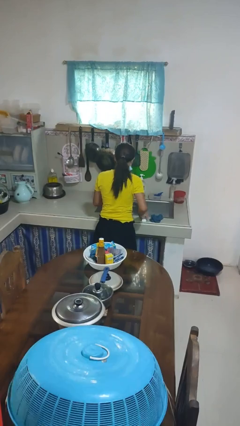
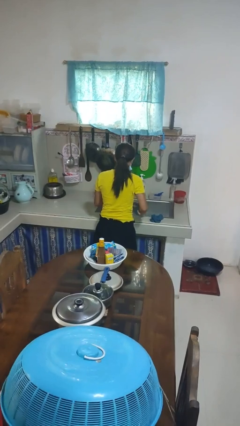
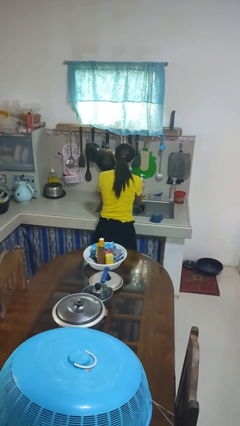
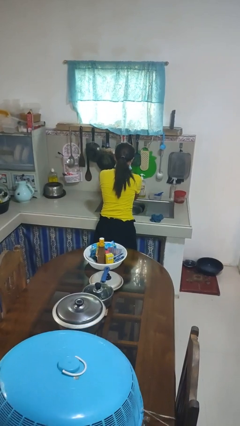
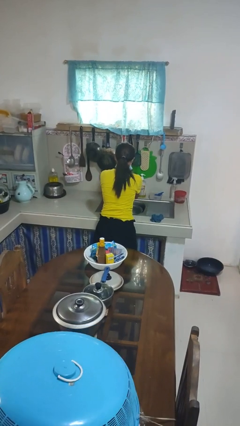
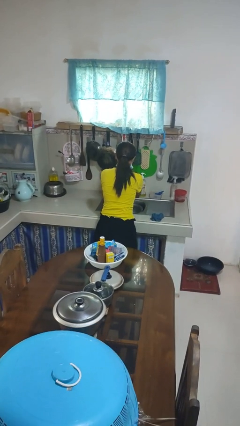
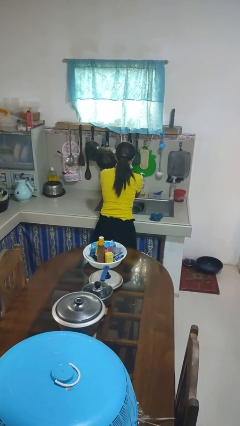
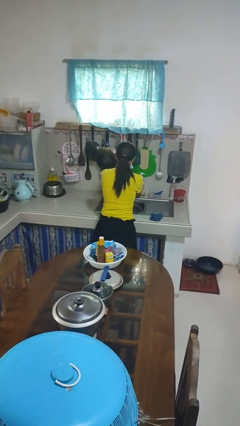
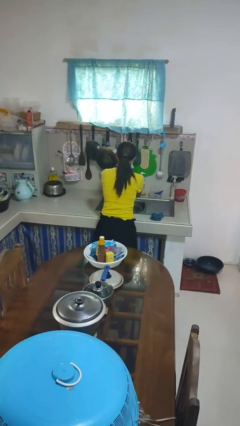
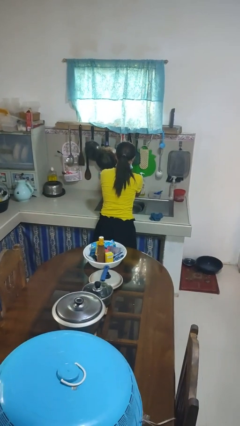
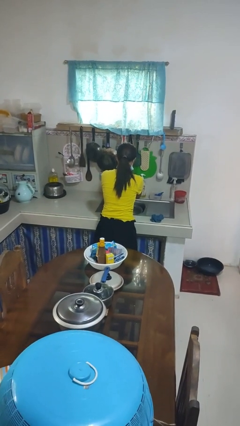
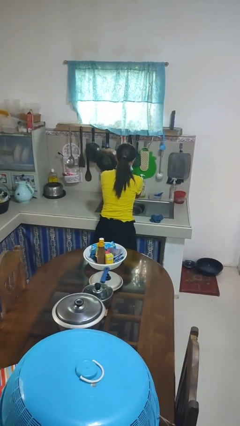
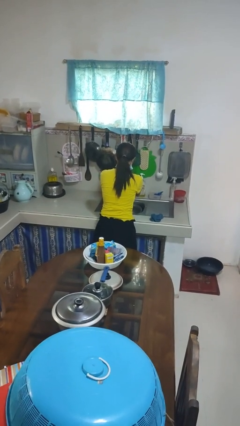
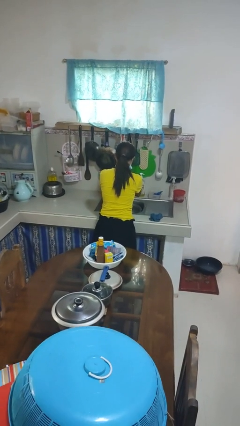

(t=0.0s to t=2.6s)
person washes hands

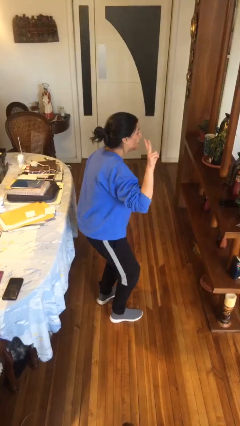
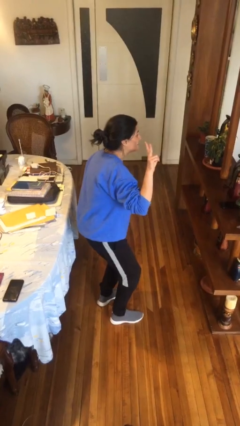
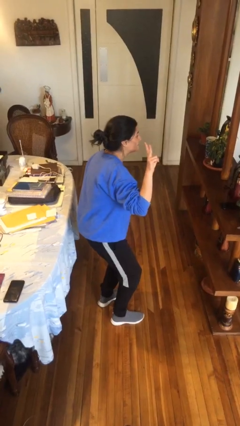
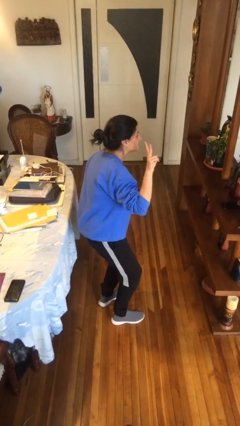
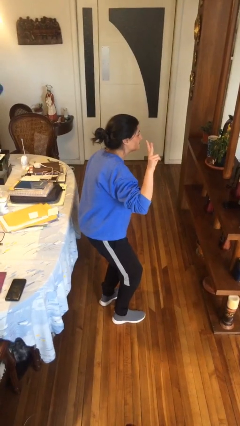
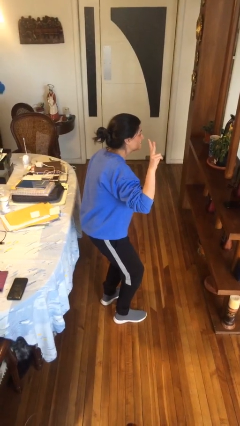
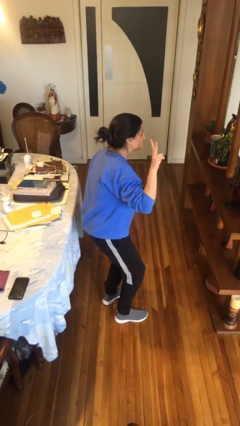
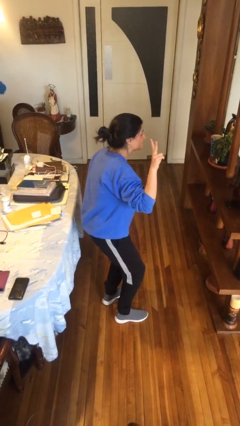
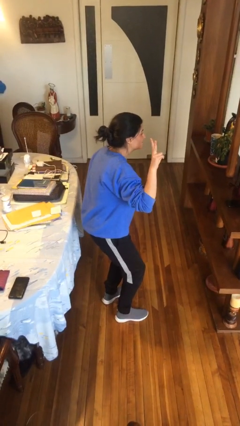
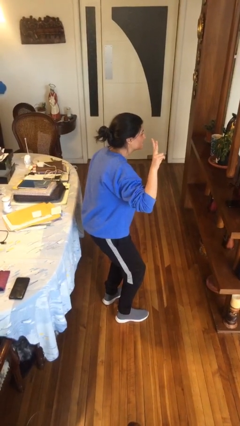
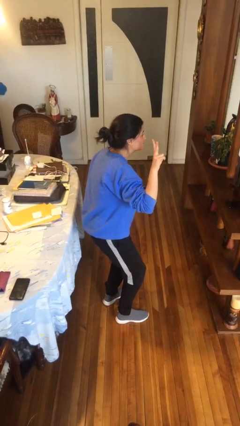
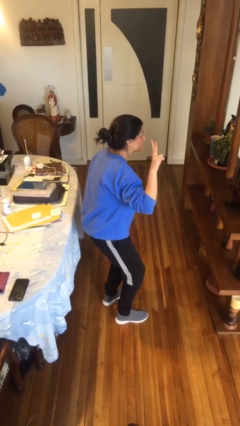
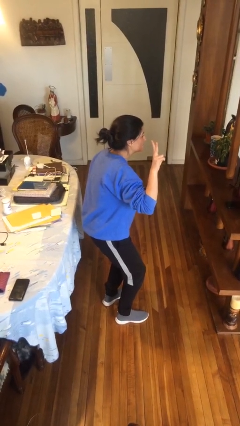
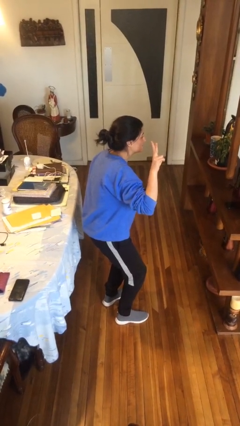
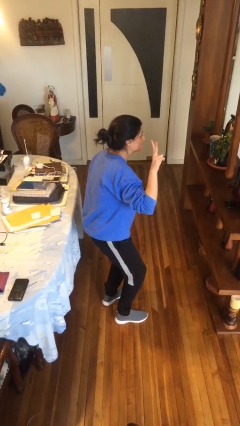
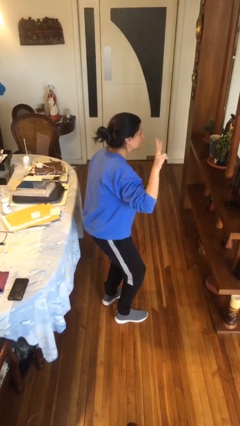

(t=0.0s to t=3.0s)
person gestures peace

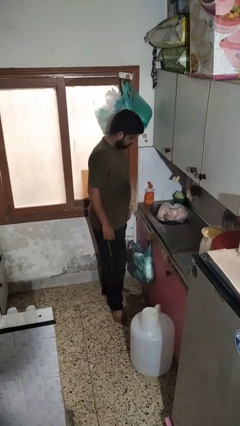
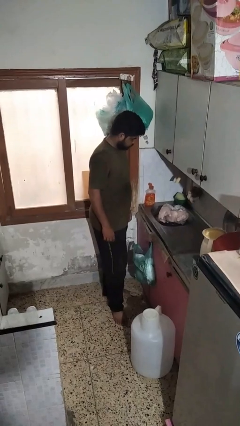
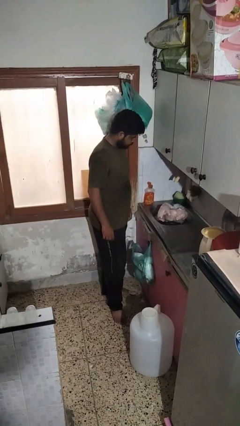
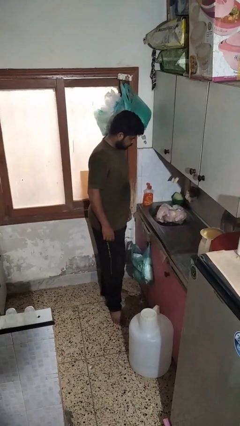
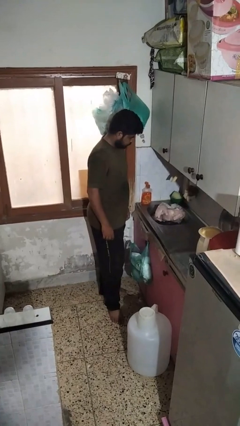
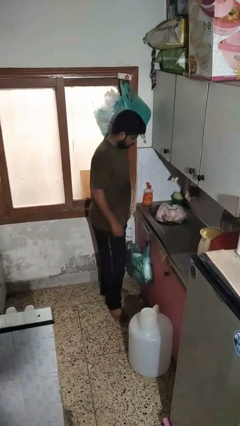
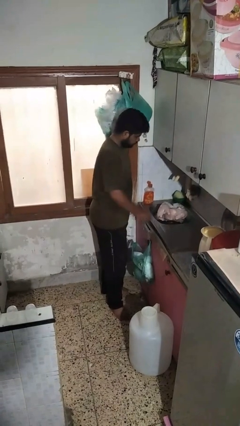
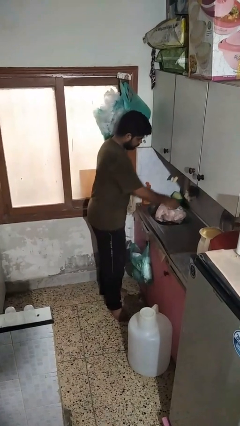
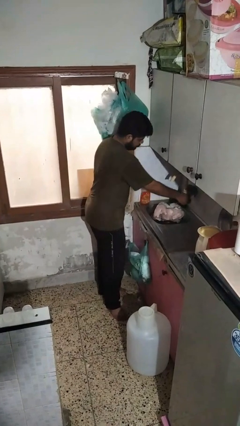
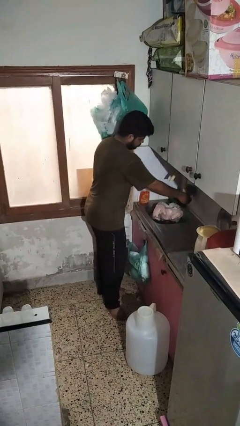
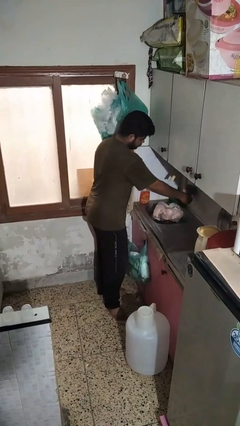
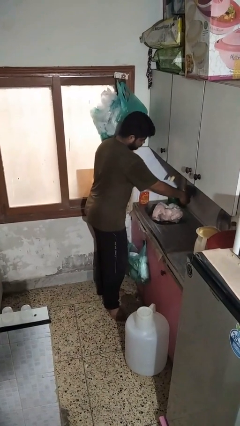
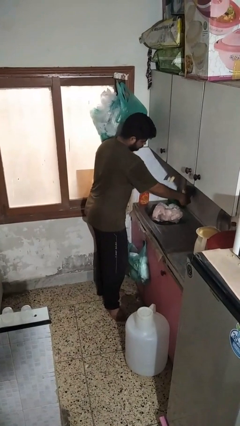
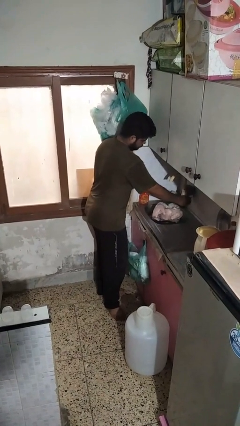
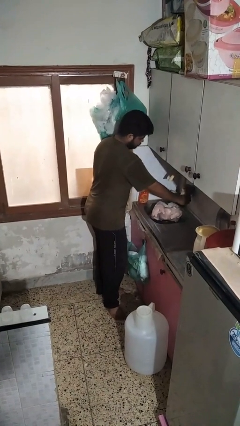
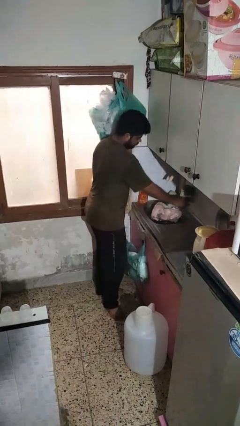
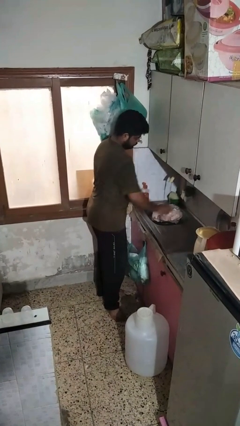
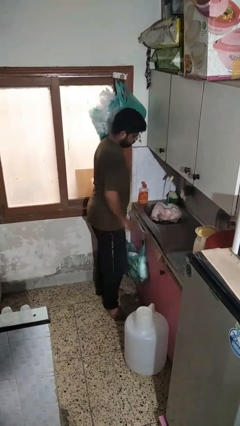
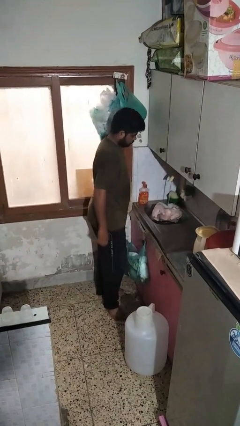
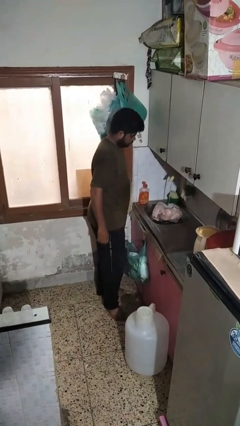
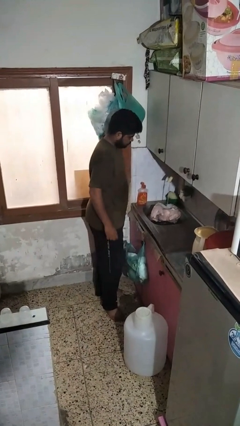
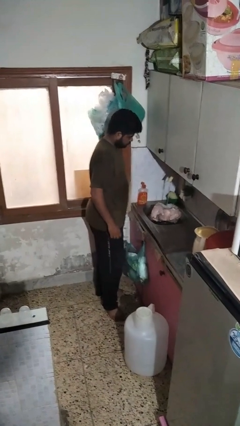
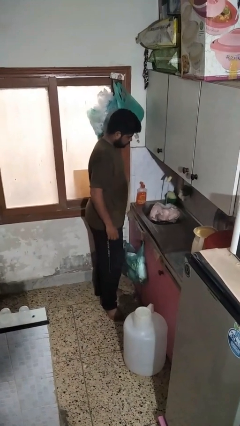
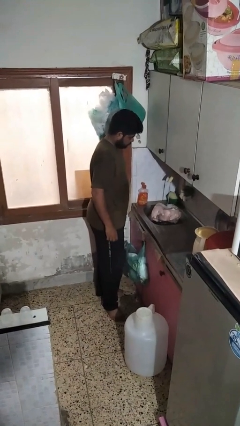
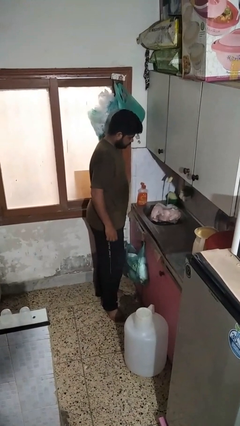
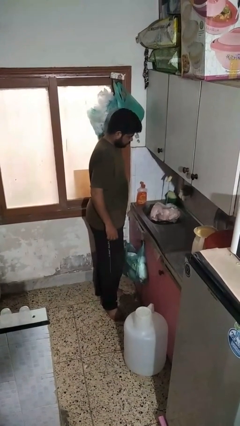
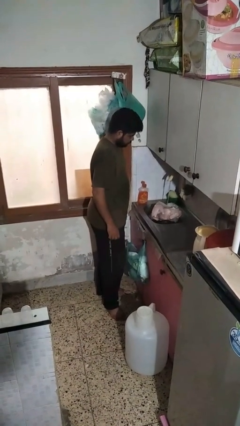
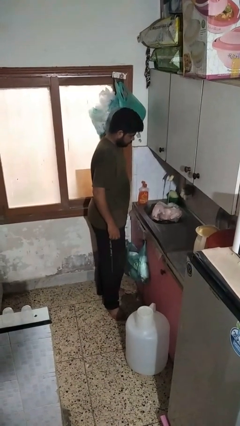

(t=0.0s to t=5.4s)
person turns on faucet

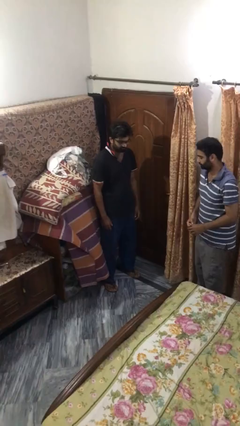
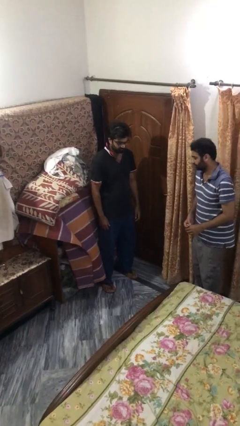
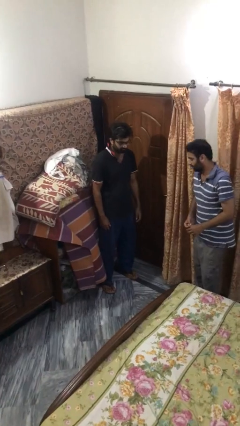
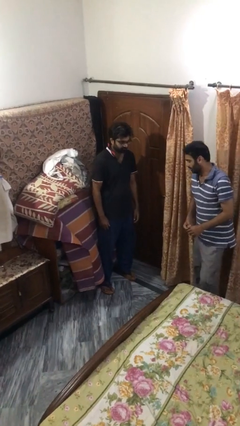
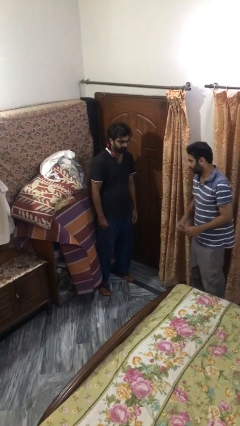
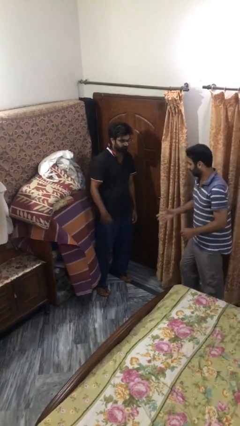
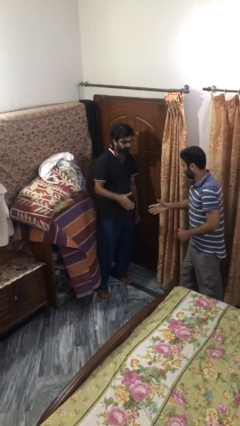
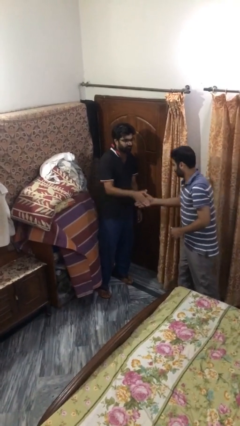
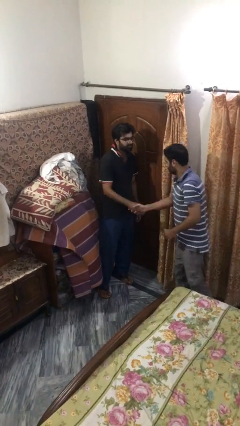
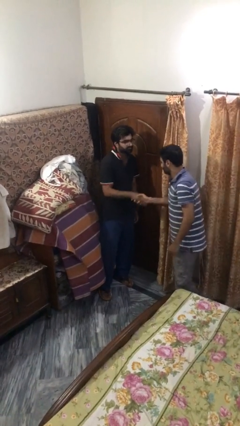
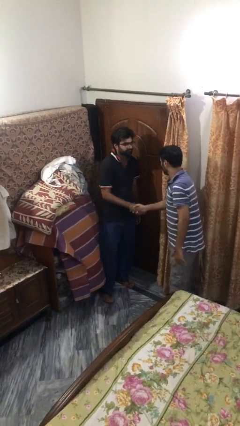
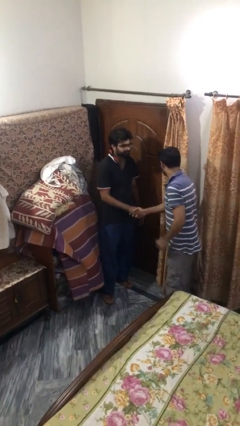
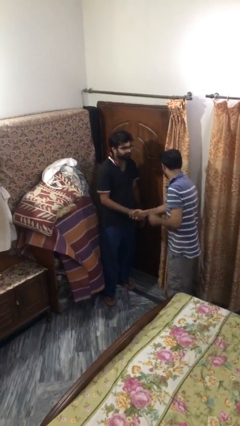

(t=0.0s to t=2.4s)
person shakes hand

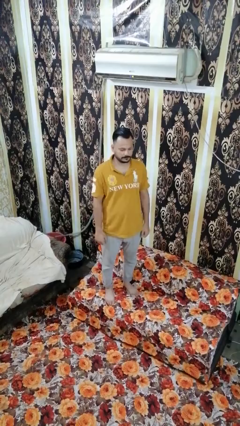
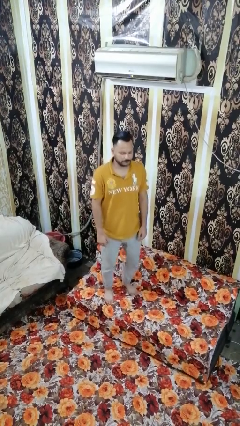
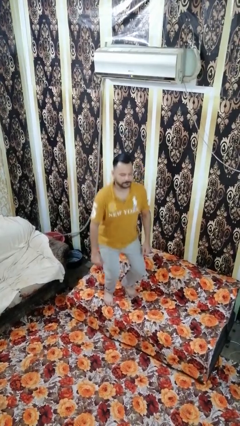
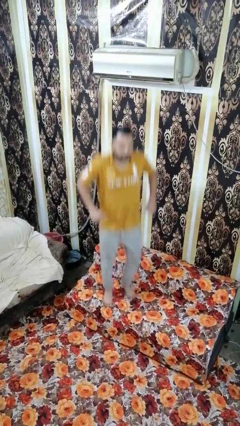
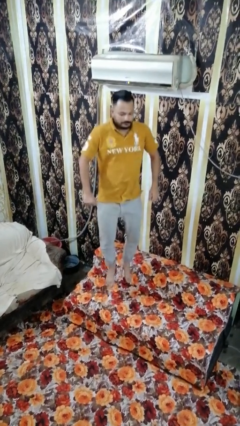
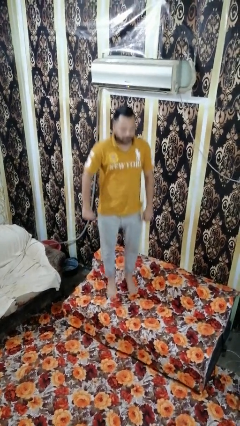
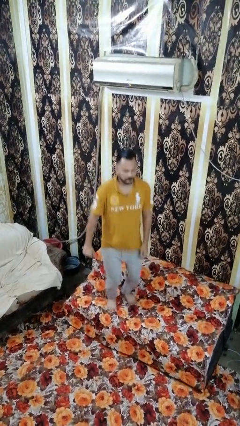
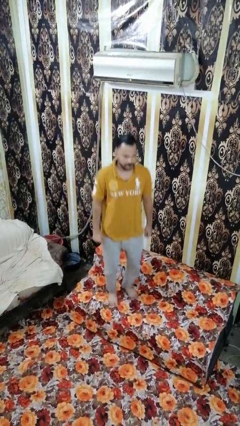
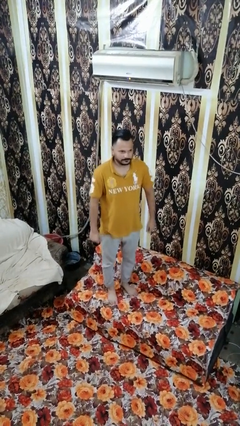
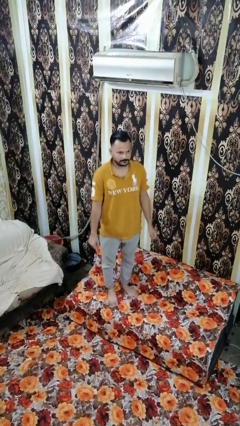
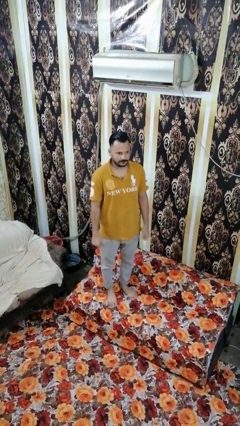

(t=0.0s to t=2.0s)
person jumps on couch

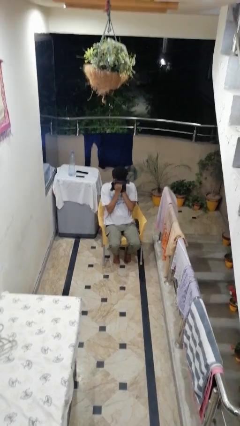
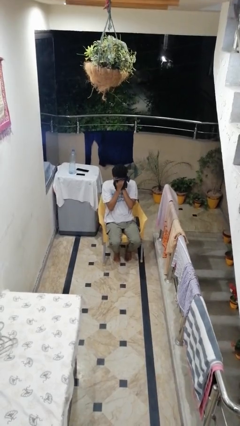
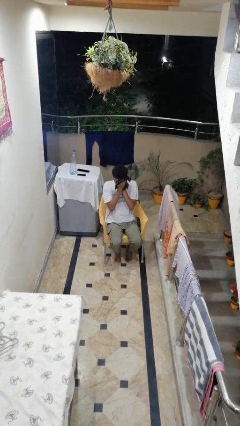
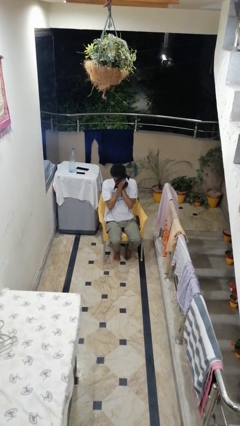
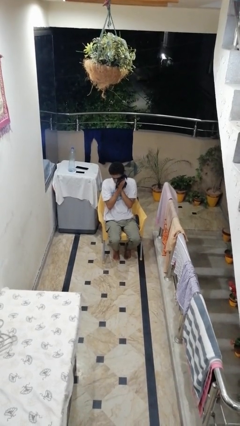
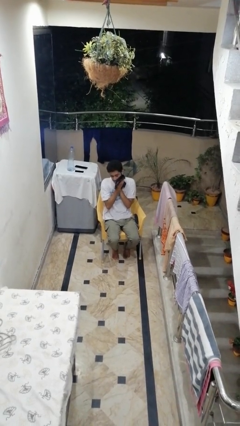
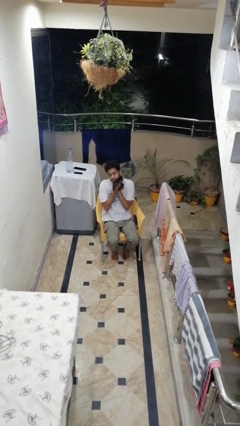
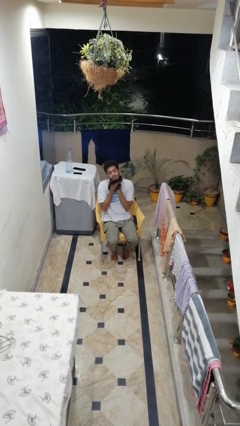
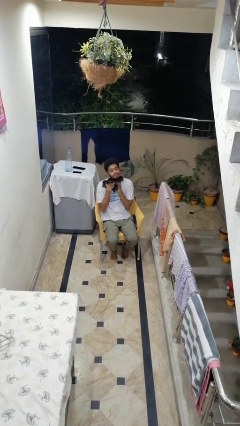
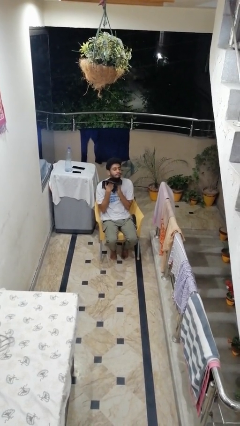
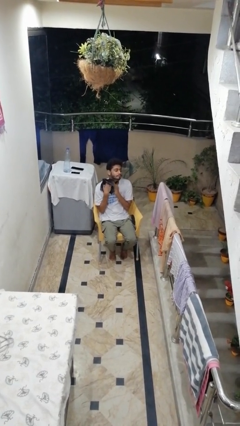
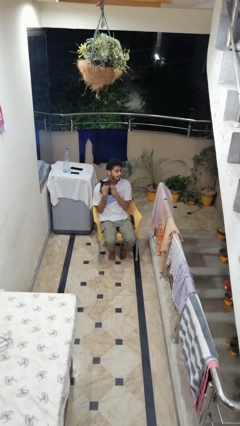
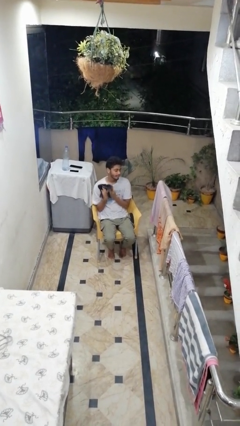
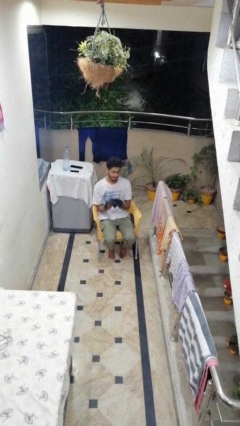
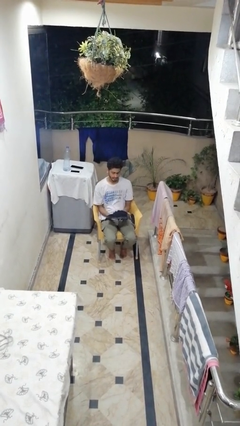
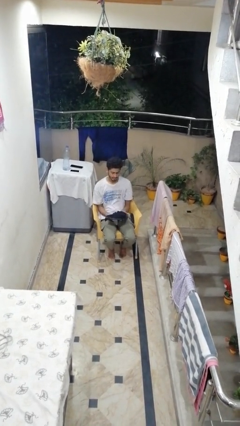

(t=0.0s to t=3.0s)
person wipes mouth with napkin
